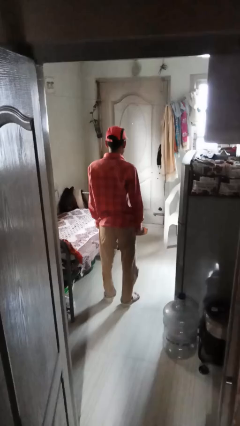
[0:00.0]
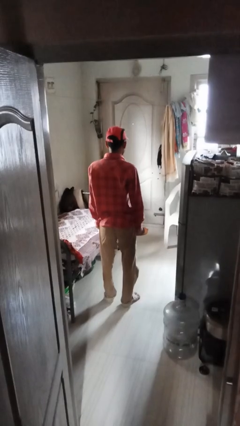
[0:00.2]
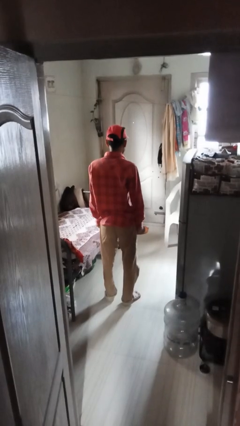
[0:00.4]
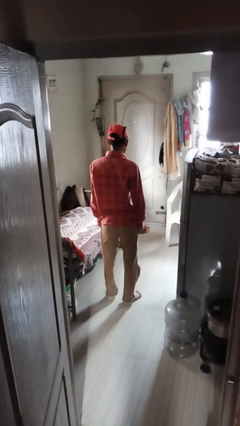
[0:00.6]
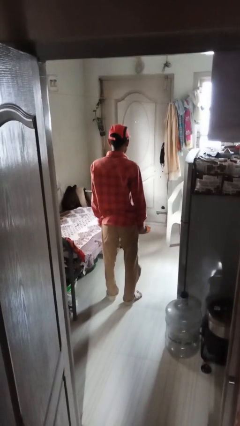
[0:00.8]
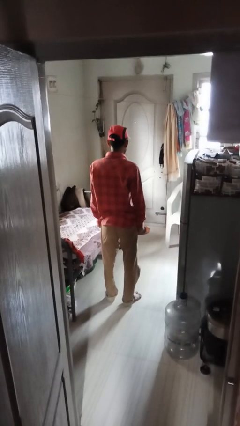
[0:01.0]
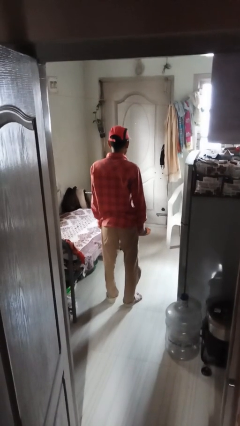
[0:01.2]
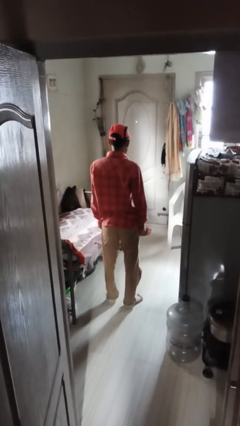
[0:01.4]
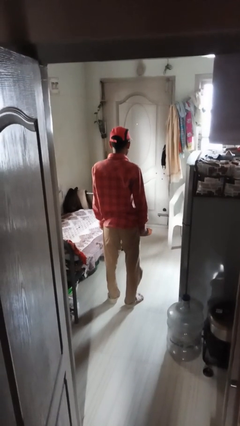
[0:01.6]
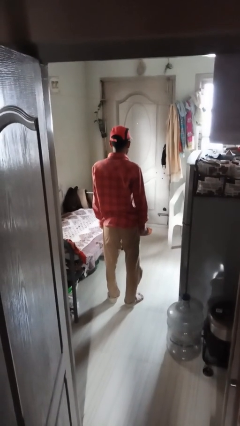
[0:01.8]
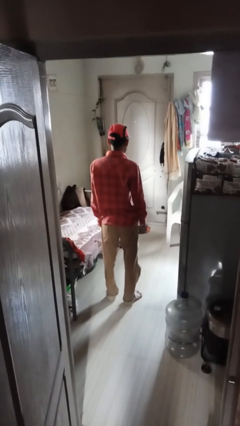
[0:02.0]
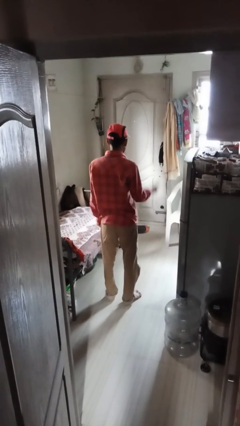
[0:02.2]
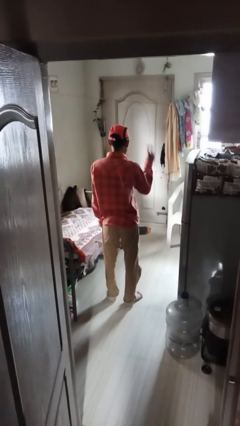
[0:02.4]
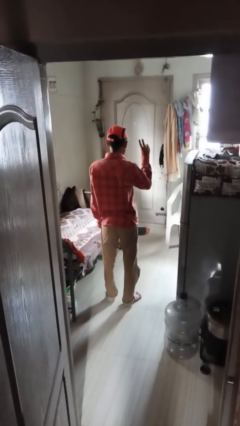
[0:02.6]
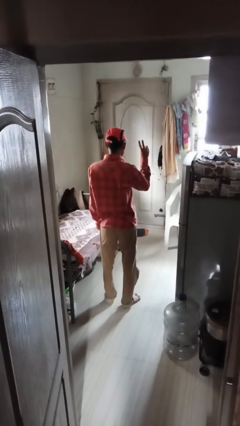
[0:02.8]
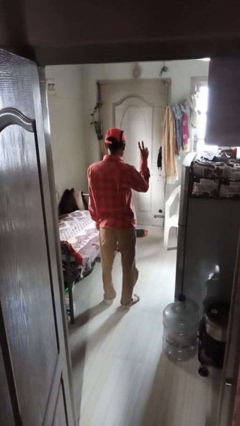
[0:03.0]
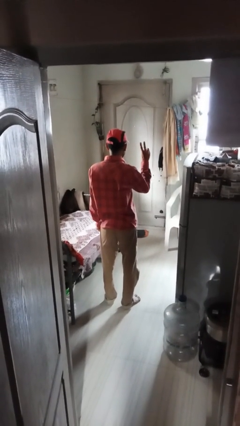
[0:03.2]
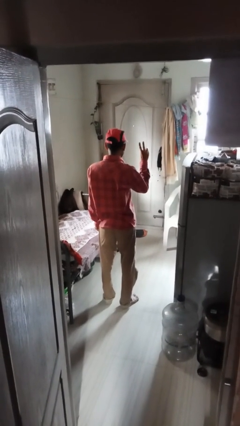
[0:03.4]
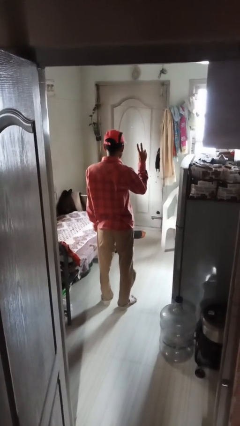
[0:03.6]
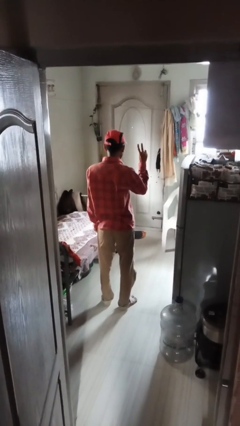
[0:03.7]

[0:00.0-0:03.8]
person gestures peace

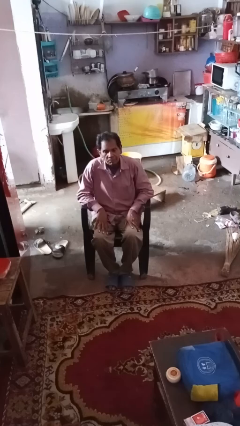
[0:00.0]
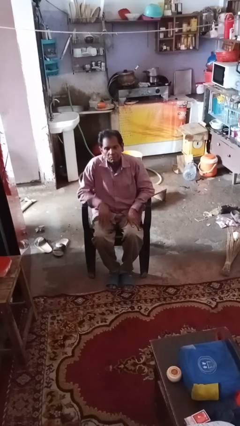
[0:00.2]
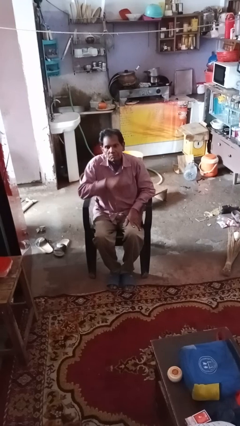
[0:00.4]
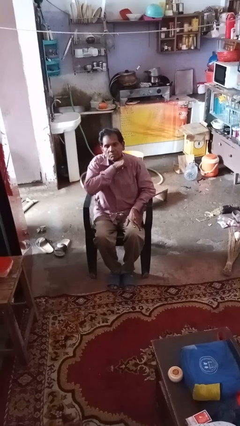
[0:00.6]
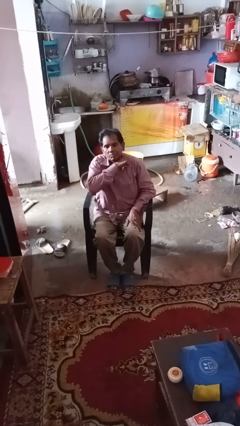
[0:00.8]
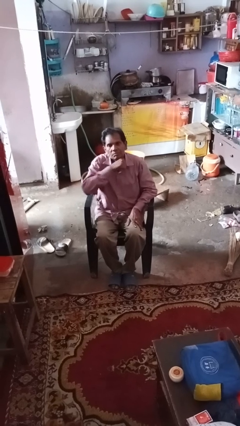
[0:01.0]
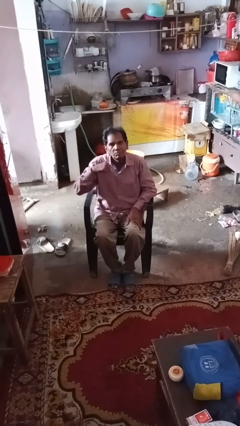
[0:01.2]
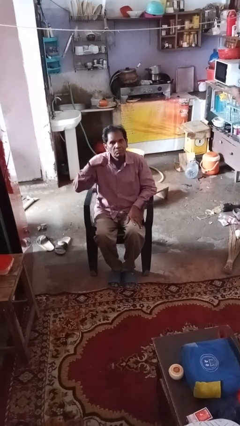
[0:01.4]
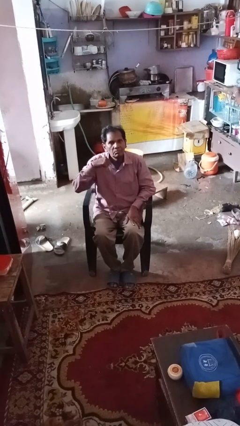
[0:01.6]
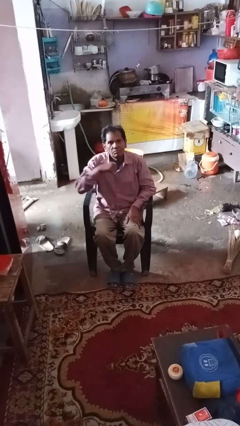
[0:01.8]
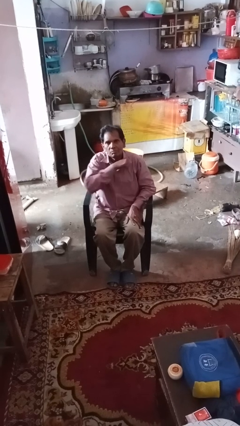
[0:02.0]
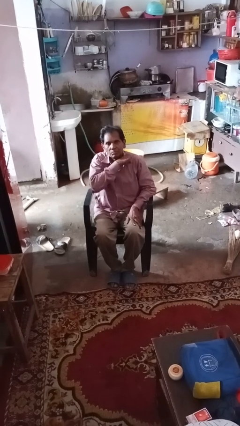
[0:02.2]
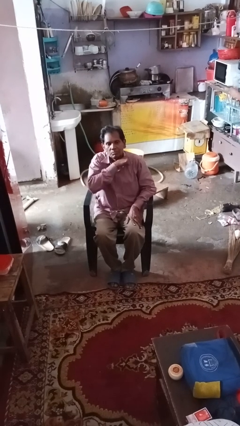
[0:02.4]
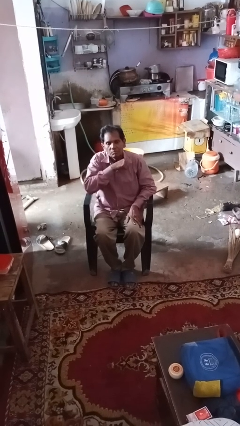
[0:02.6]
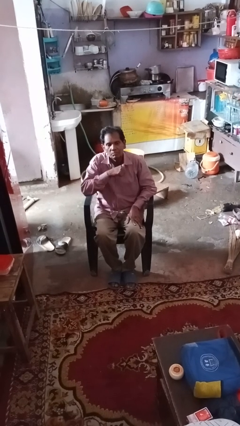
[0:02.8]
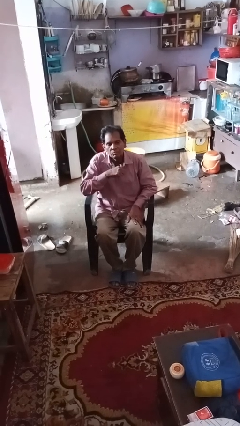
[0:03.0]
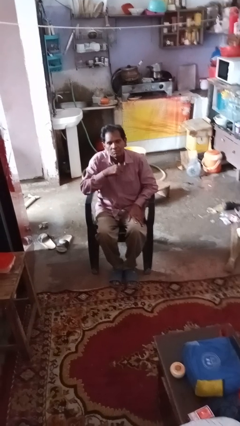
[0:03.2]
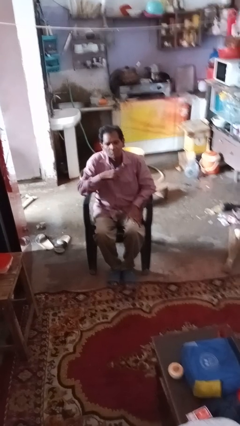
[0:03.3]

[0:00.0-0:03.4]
person gestures cut

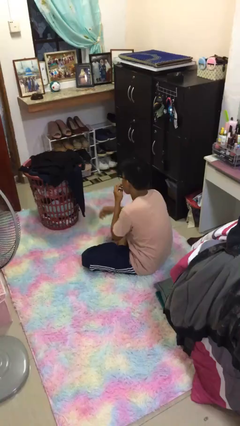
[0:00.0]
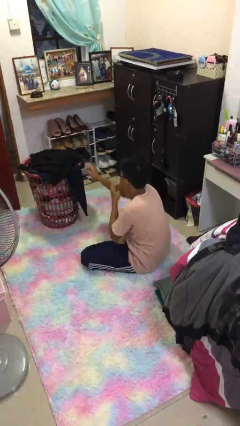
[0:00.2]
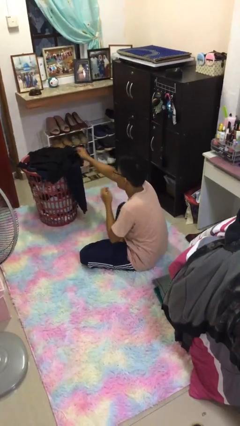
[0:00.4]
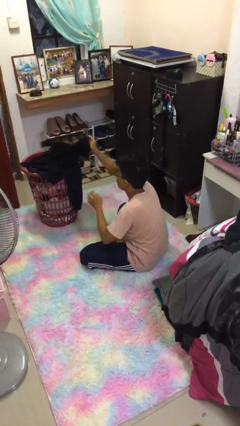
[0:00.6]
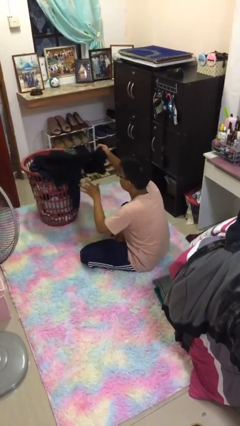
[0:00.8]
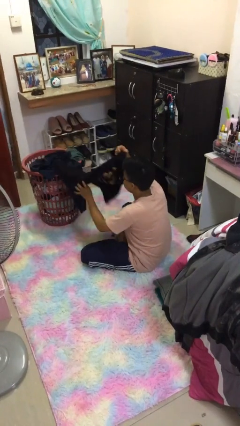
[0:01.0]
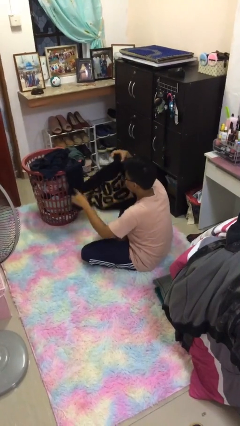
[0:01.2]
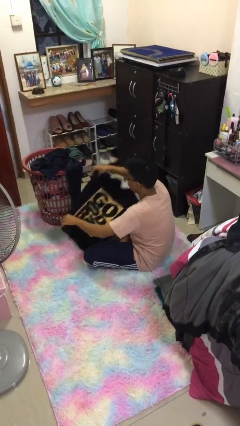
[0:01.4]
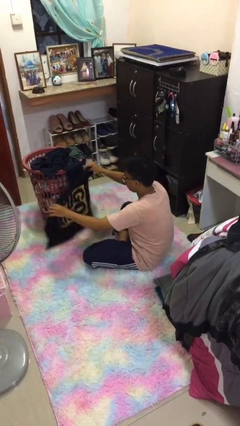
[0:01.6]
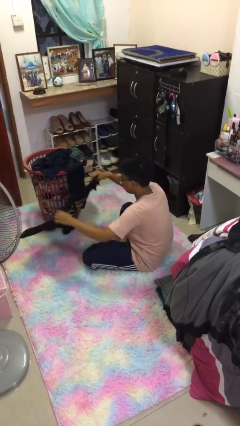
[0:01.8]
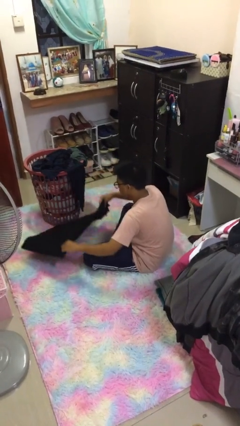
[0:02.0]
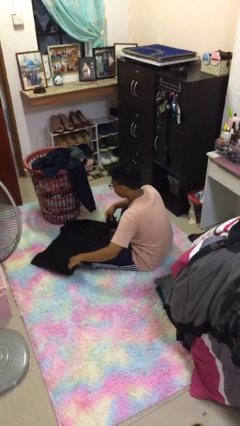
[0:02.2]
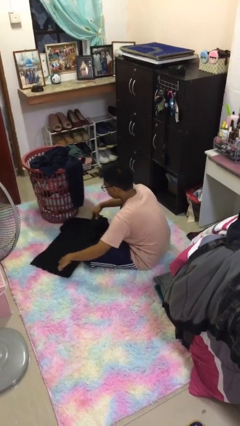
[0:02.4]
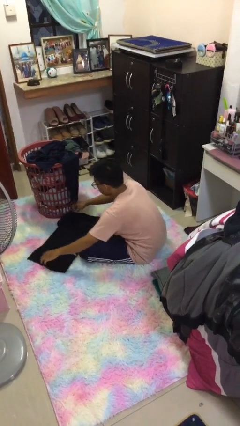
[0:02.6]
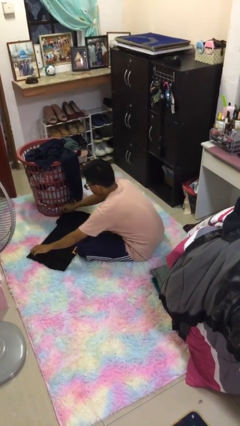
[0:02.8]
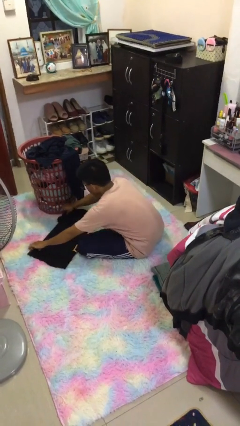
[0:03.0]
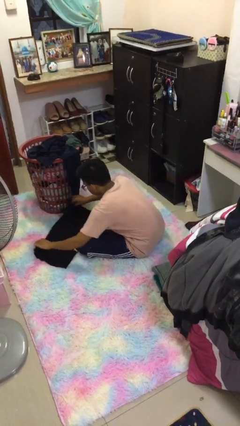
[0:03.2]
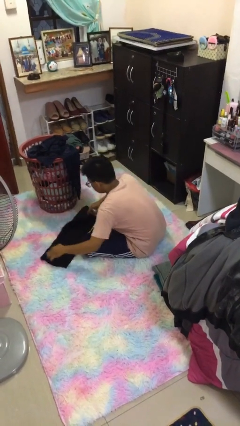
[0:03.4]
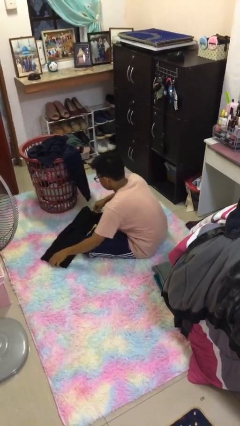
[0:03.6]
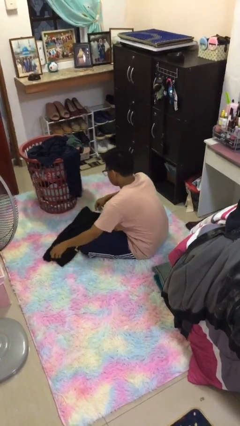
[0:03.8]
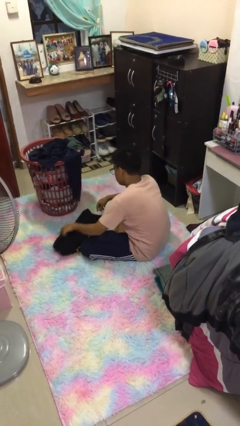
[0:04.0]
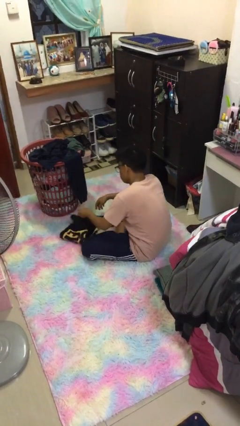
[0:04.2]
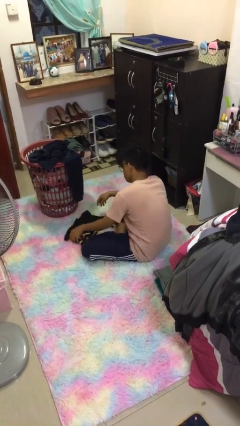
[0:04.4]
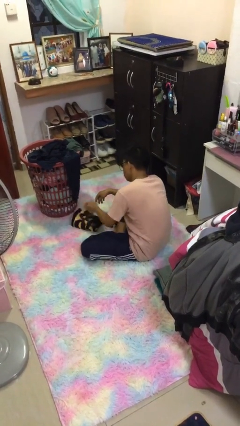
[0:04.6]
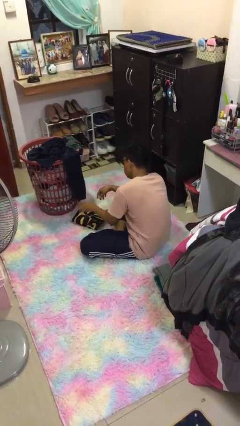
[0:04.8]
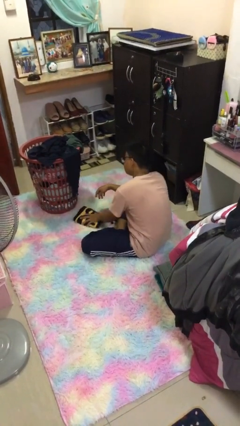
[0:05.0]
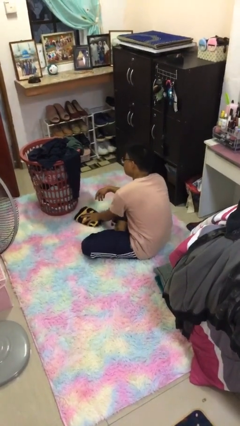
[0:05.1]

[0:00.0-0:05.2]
person folds shirt

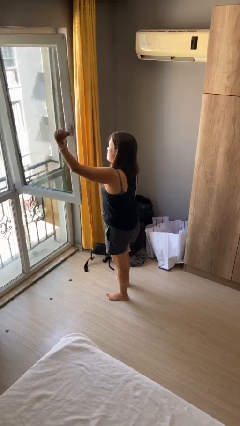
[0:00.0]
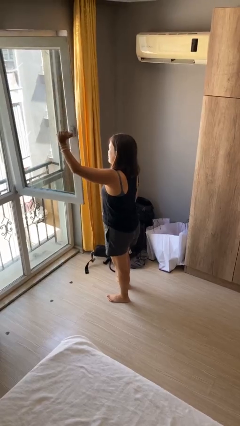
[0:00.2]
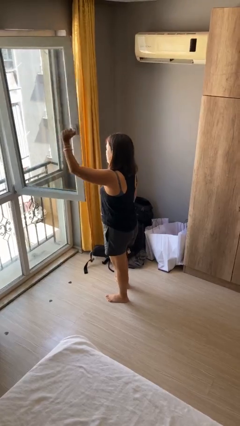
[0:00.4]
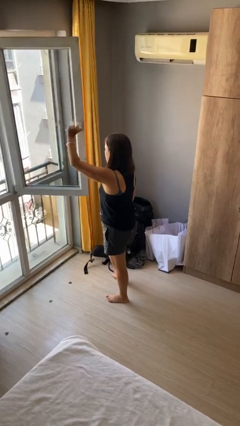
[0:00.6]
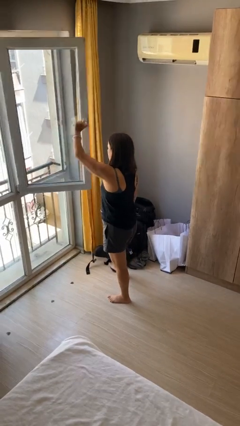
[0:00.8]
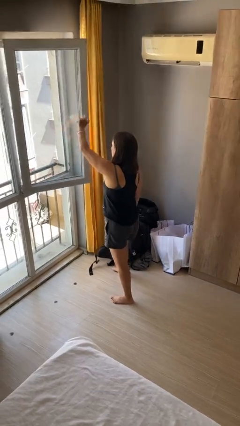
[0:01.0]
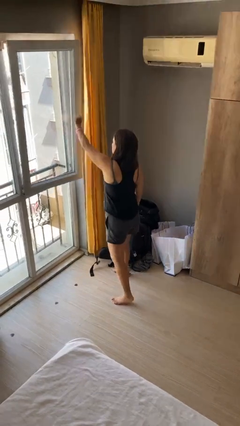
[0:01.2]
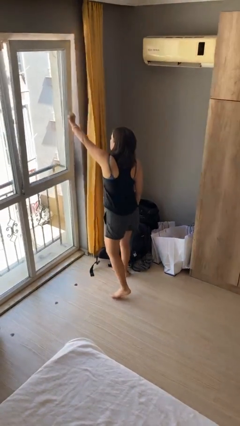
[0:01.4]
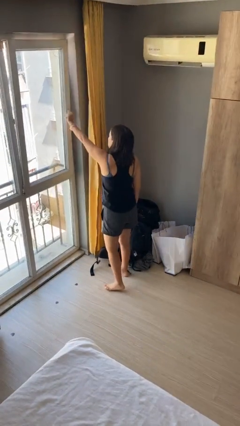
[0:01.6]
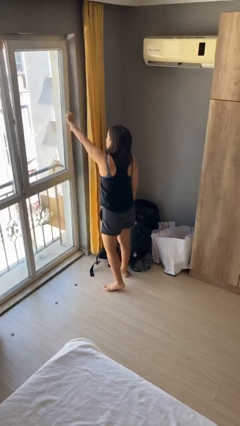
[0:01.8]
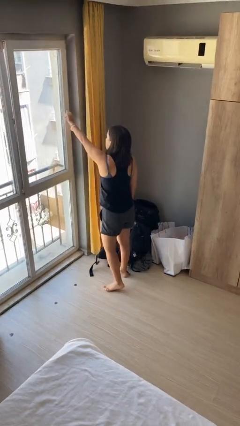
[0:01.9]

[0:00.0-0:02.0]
person closes home window

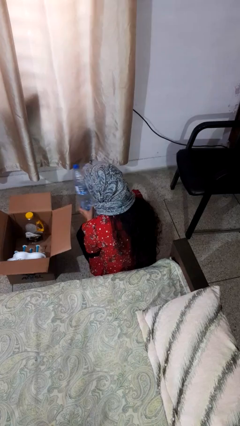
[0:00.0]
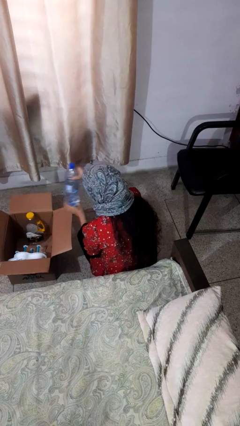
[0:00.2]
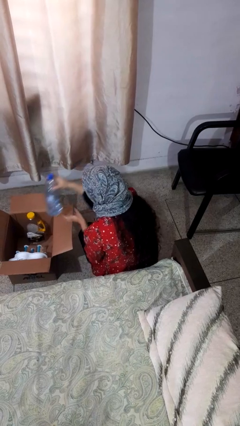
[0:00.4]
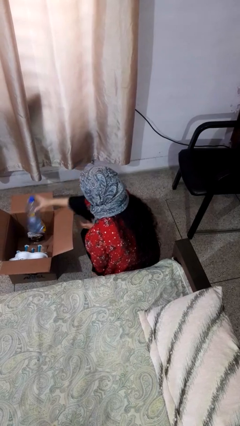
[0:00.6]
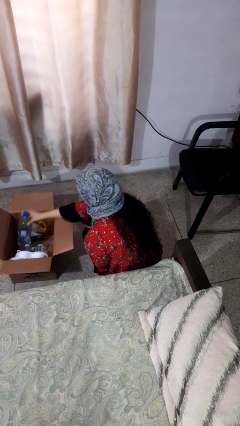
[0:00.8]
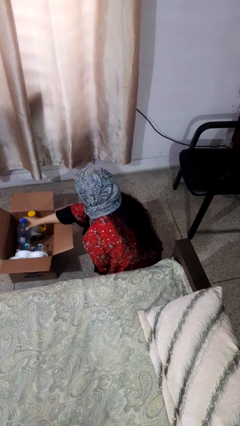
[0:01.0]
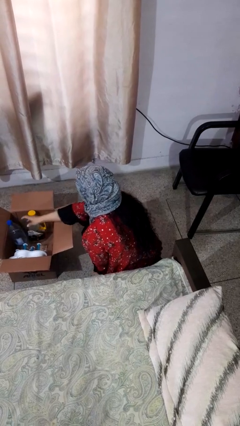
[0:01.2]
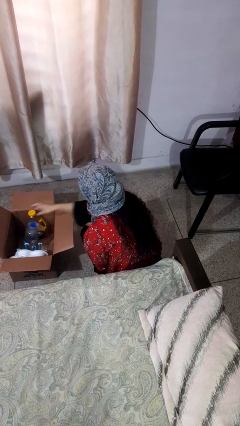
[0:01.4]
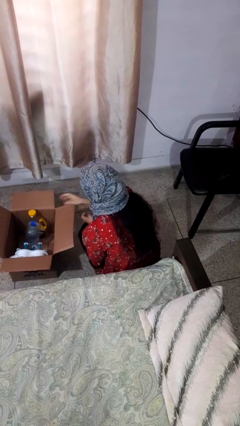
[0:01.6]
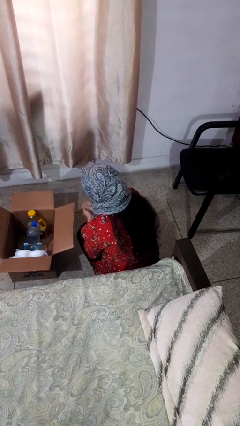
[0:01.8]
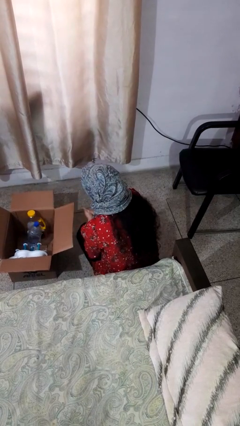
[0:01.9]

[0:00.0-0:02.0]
person puts object into box

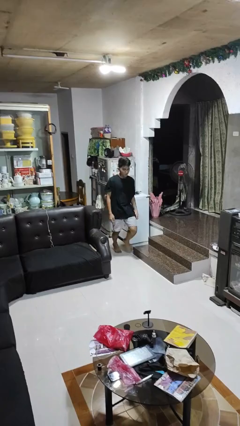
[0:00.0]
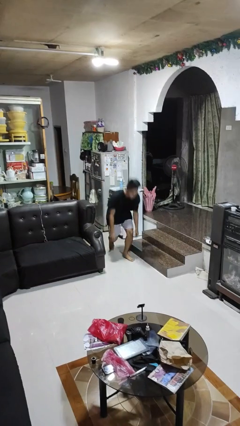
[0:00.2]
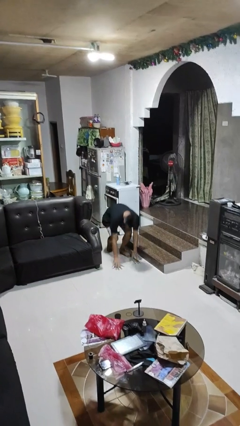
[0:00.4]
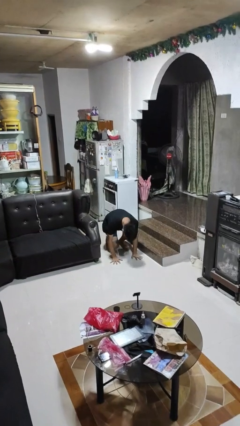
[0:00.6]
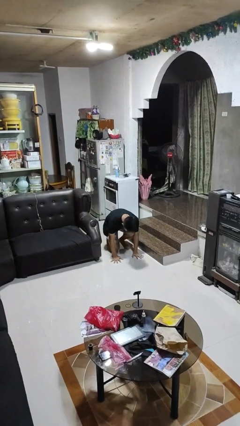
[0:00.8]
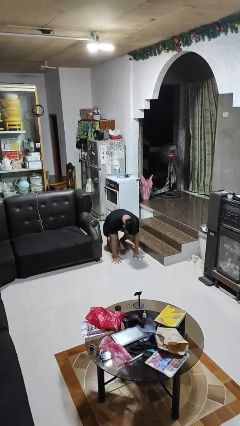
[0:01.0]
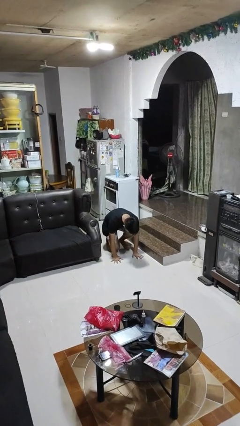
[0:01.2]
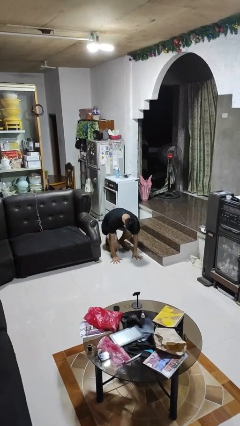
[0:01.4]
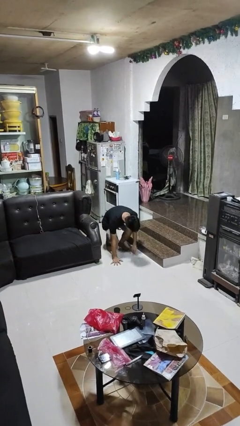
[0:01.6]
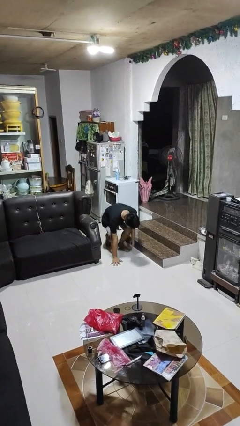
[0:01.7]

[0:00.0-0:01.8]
person trips on object on floor
